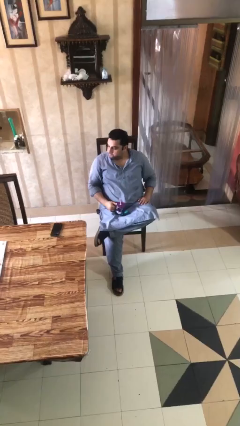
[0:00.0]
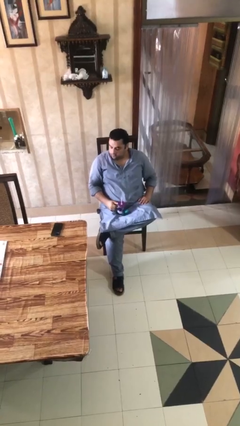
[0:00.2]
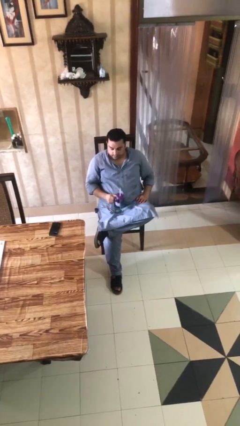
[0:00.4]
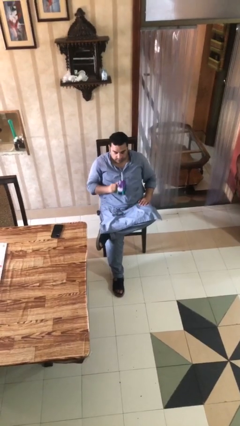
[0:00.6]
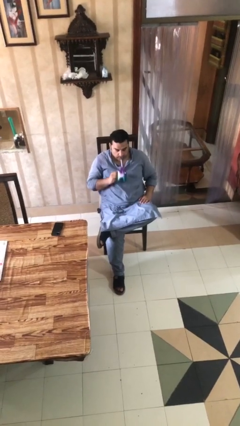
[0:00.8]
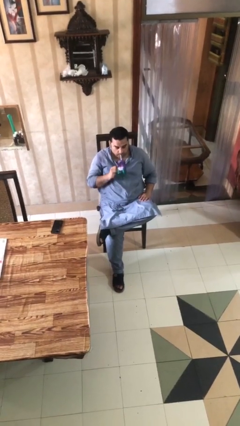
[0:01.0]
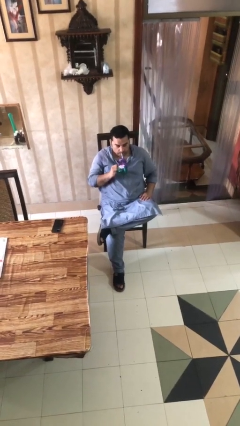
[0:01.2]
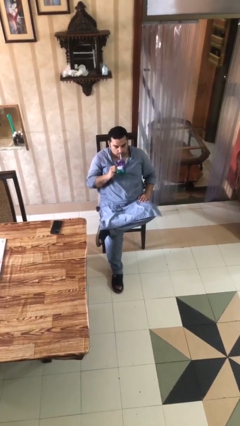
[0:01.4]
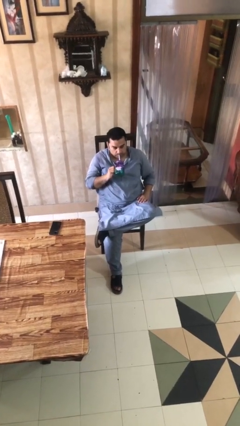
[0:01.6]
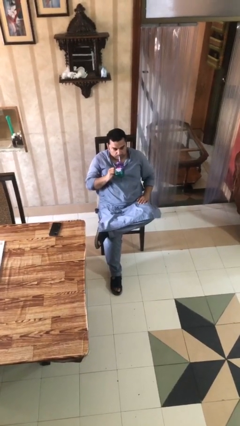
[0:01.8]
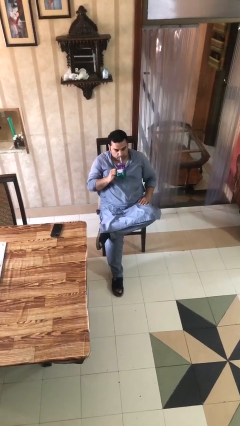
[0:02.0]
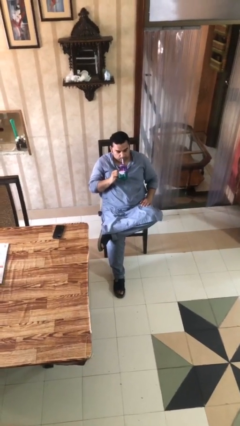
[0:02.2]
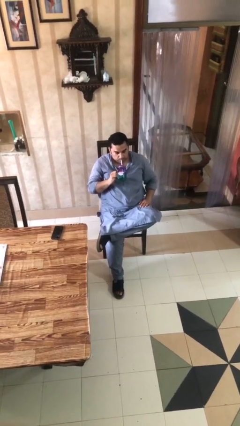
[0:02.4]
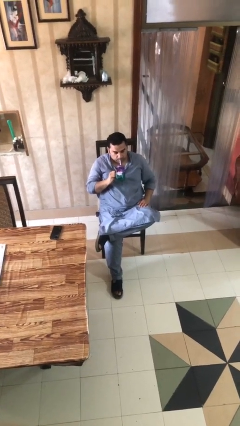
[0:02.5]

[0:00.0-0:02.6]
person drinks from straw

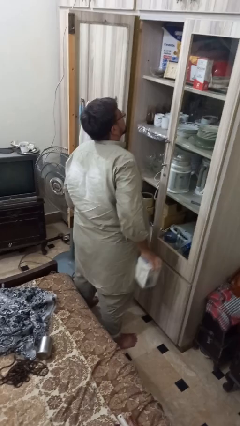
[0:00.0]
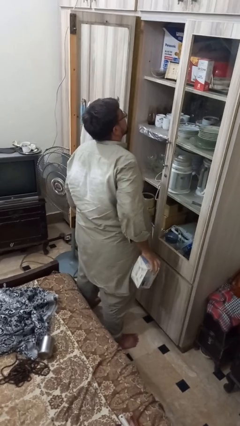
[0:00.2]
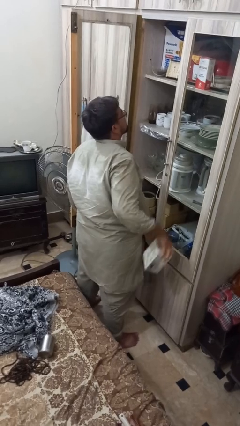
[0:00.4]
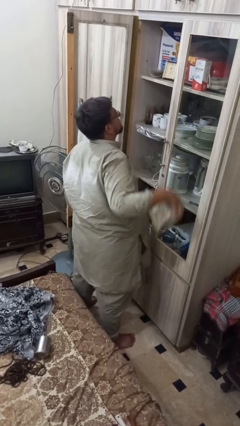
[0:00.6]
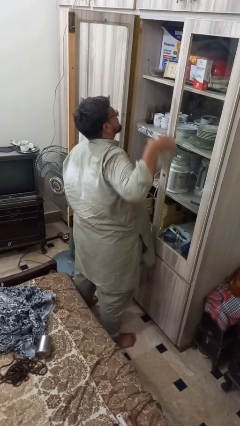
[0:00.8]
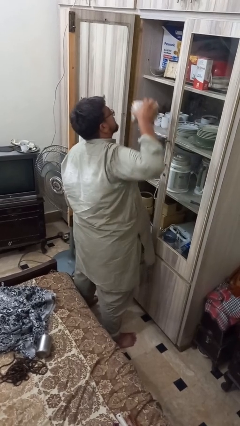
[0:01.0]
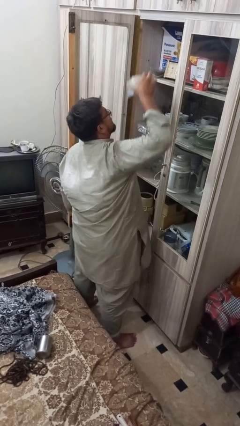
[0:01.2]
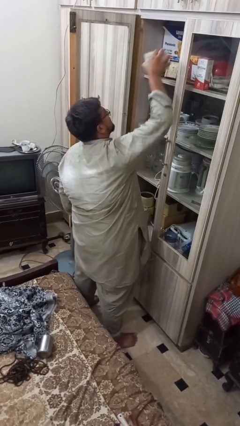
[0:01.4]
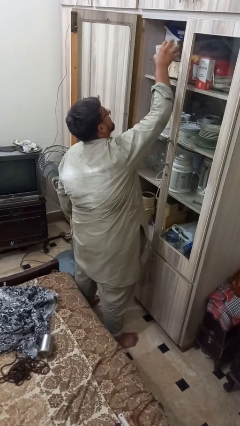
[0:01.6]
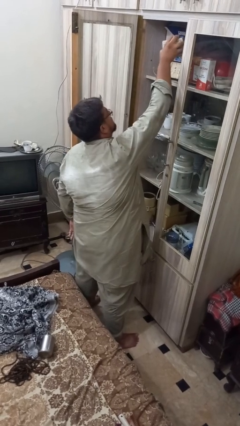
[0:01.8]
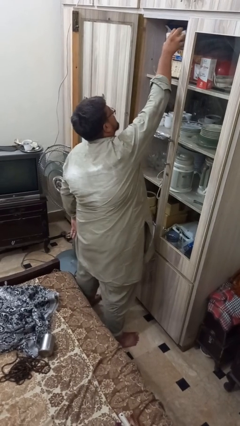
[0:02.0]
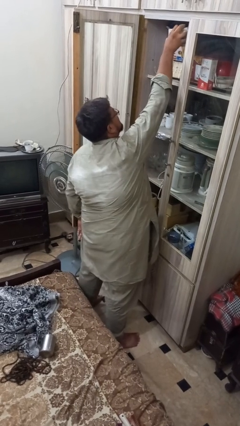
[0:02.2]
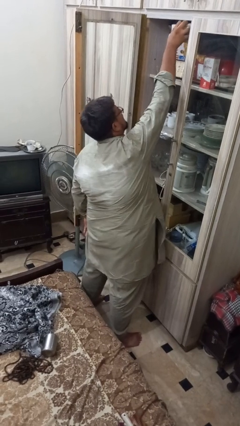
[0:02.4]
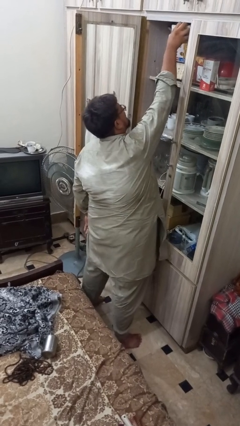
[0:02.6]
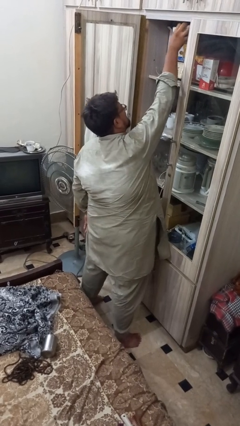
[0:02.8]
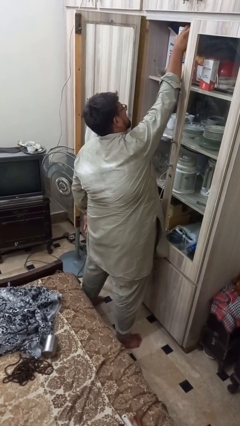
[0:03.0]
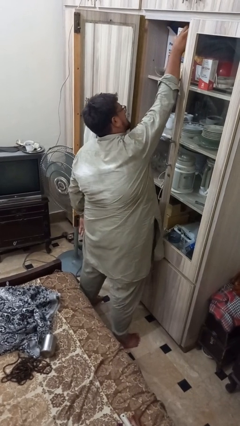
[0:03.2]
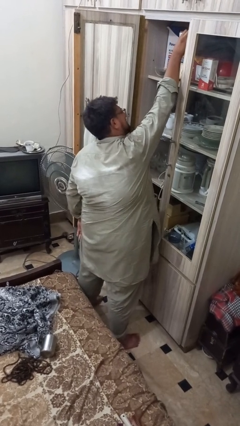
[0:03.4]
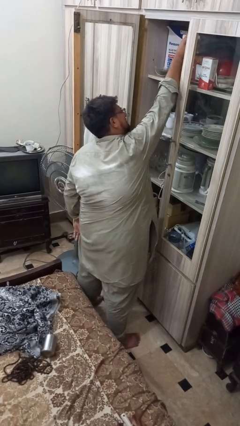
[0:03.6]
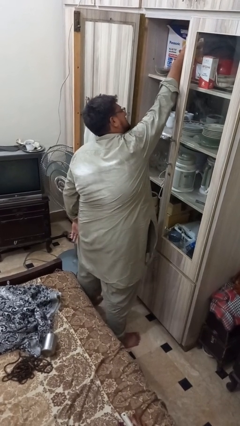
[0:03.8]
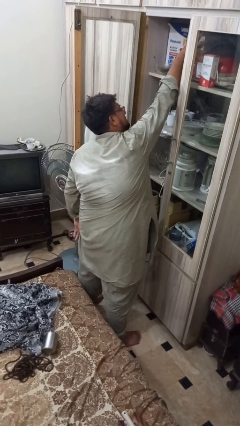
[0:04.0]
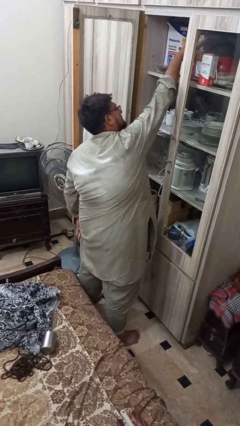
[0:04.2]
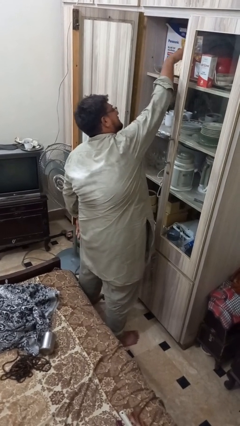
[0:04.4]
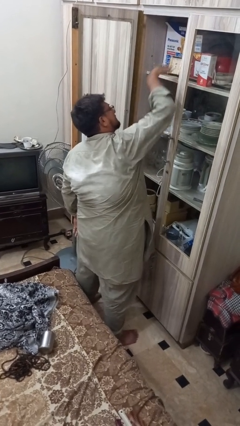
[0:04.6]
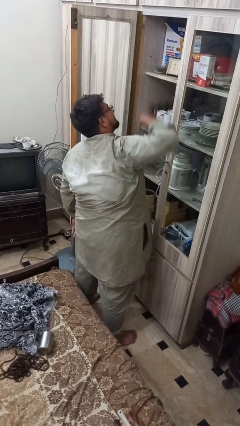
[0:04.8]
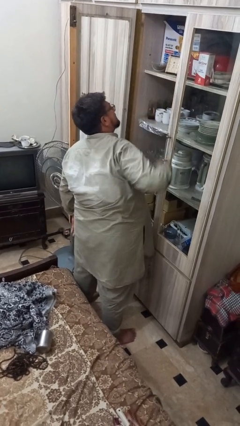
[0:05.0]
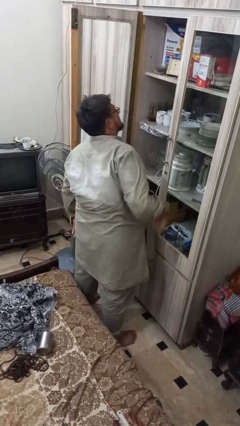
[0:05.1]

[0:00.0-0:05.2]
person puts down object on shelf

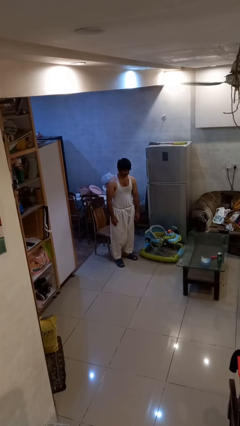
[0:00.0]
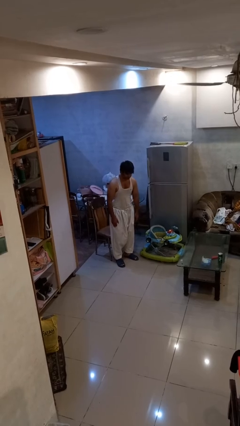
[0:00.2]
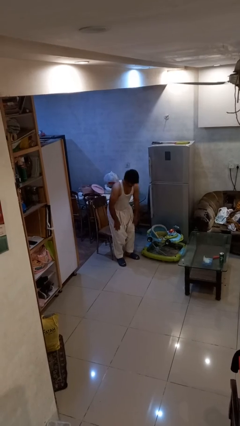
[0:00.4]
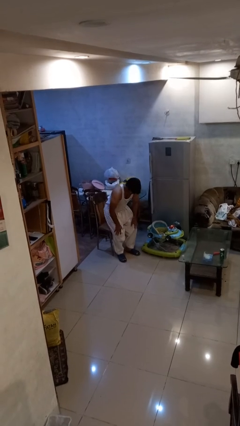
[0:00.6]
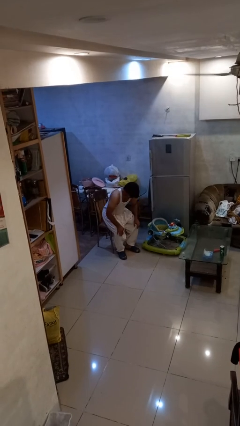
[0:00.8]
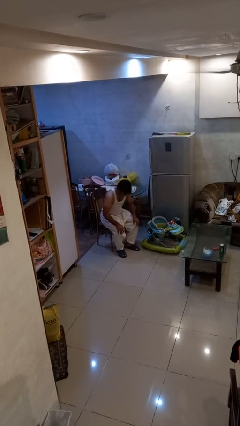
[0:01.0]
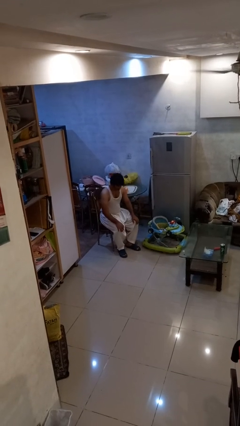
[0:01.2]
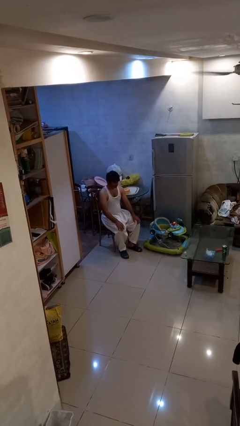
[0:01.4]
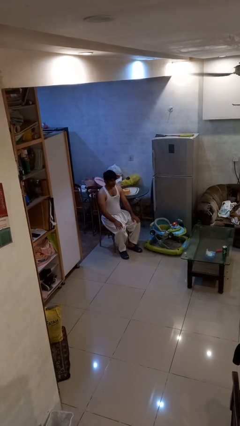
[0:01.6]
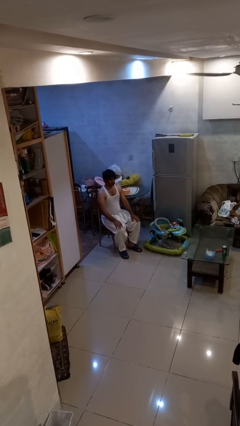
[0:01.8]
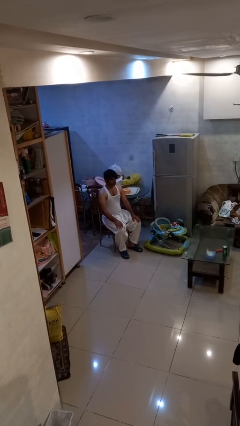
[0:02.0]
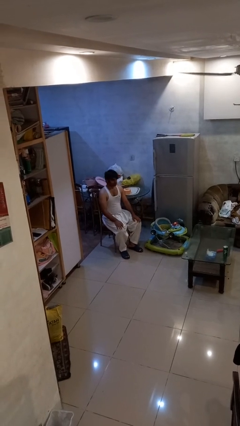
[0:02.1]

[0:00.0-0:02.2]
person sits down

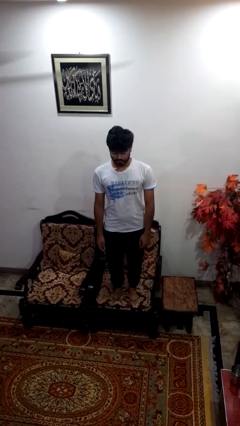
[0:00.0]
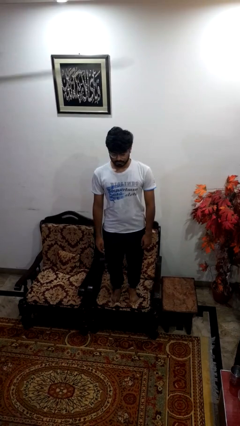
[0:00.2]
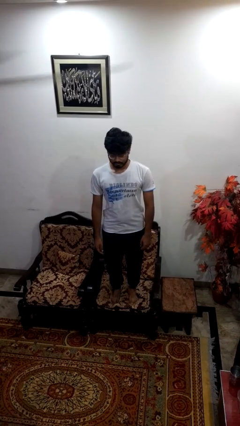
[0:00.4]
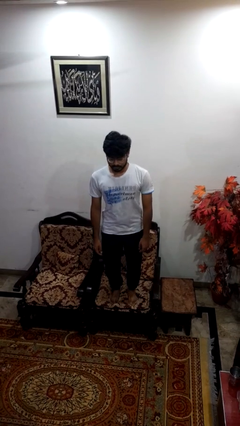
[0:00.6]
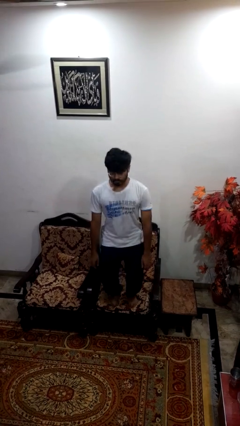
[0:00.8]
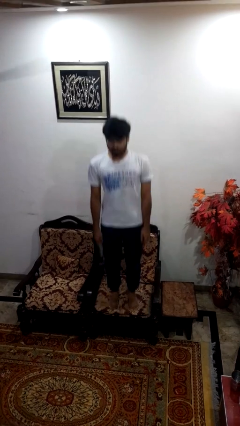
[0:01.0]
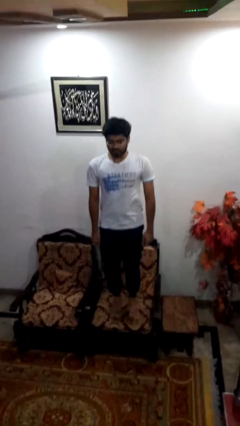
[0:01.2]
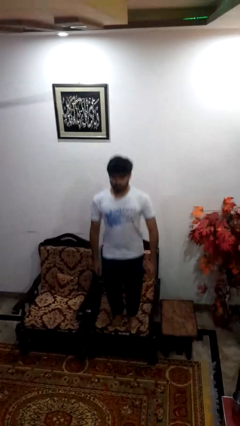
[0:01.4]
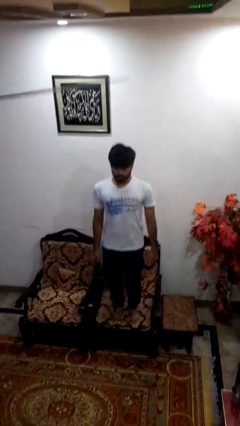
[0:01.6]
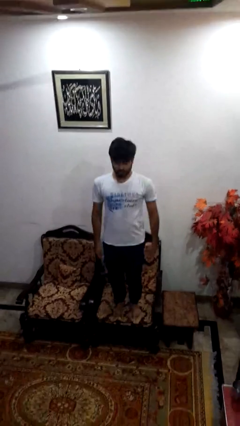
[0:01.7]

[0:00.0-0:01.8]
person jumps on couch

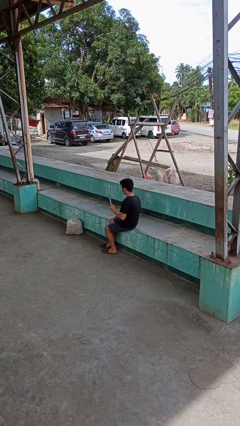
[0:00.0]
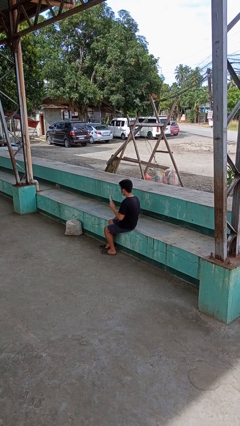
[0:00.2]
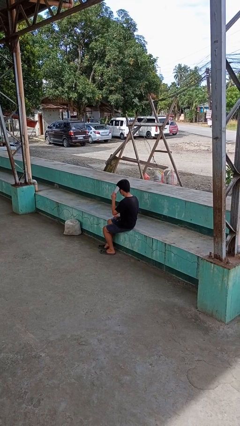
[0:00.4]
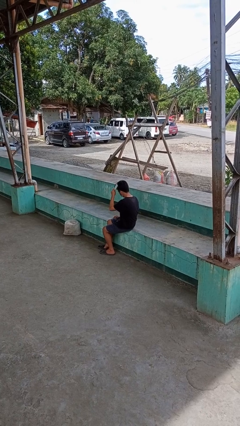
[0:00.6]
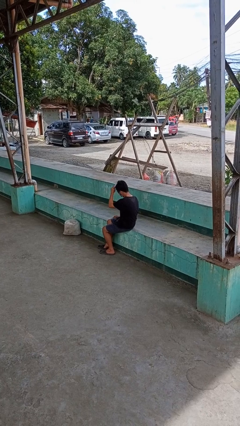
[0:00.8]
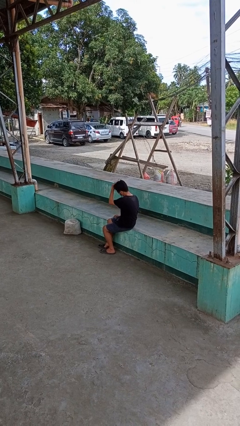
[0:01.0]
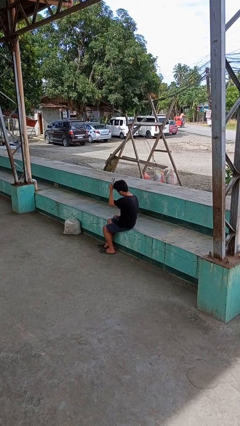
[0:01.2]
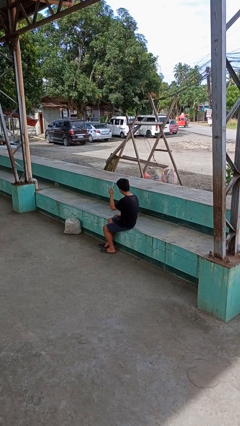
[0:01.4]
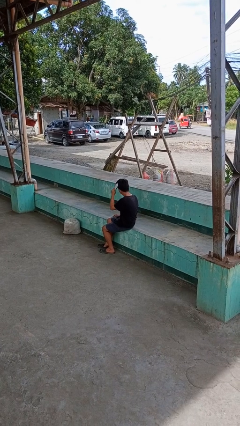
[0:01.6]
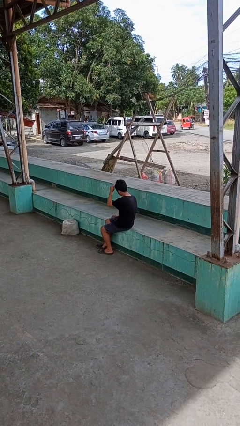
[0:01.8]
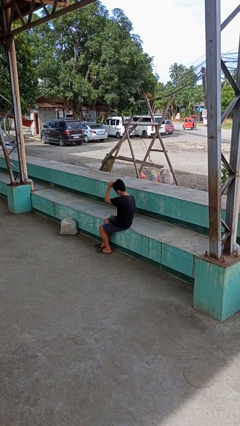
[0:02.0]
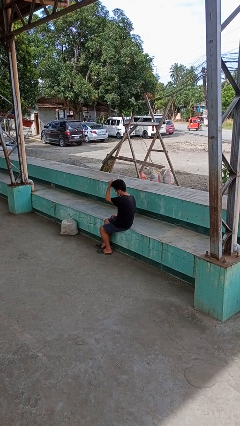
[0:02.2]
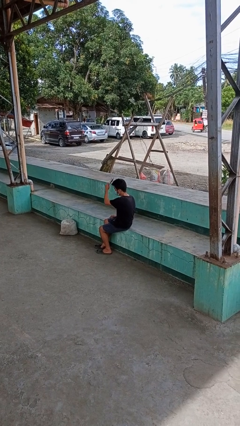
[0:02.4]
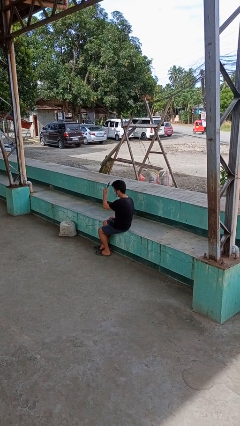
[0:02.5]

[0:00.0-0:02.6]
person brushes hair

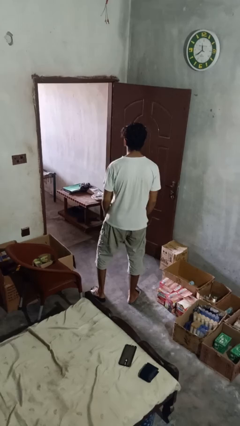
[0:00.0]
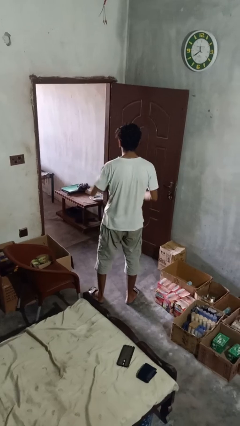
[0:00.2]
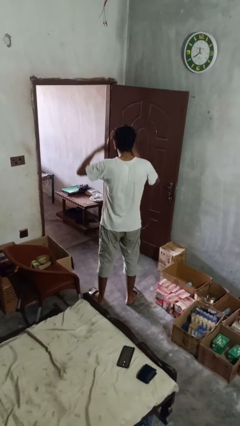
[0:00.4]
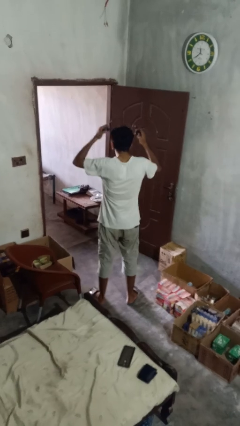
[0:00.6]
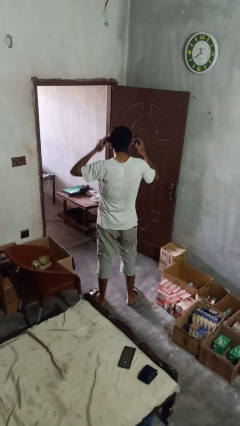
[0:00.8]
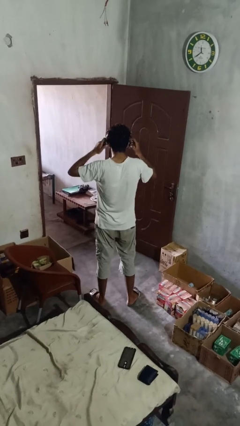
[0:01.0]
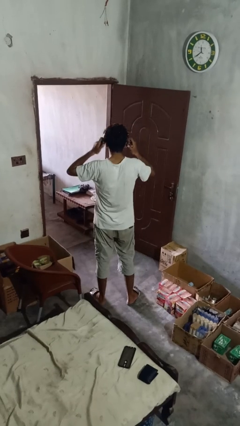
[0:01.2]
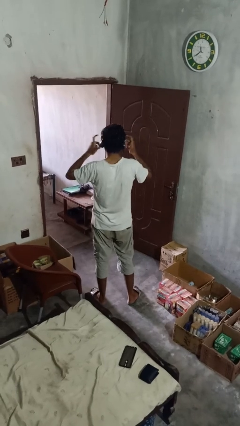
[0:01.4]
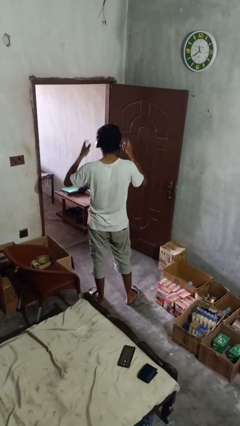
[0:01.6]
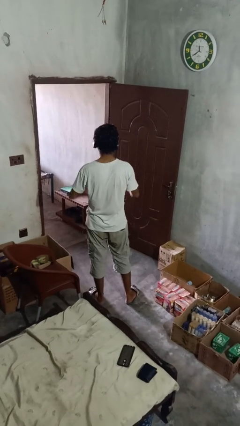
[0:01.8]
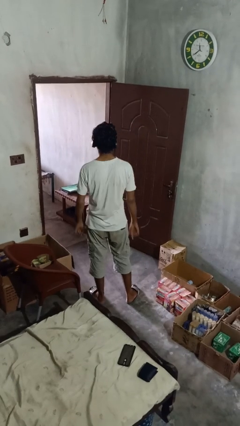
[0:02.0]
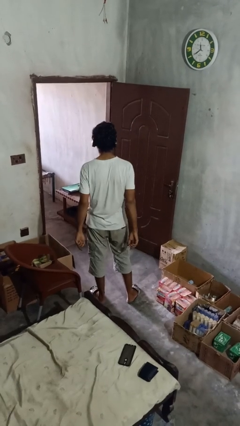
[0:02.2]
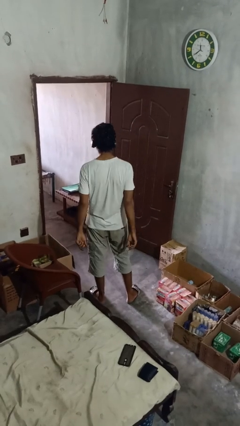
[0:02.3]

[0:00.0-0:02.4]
person puts on headphones

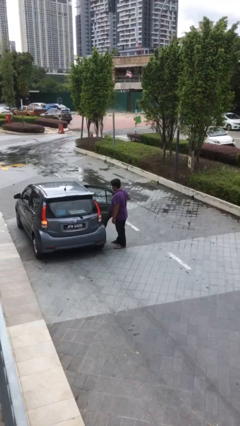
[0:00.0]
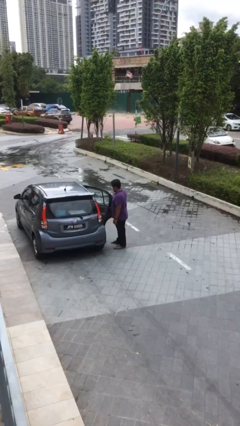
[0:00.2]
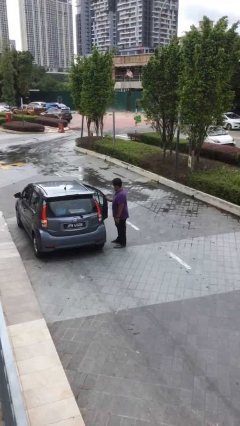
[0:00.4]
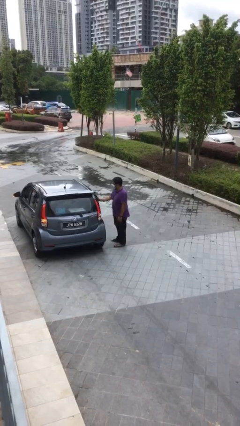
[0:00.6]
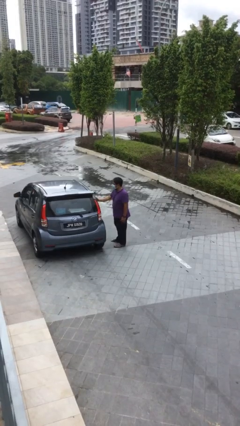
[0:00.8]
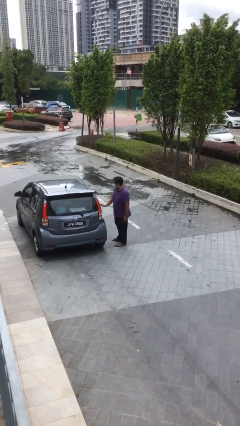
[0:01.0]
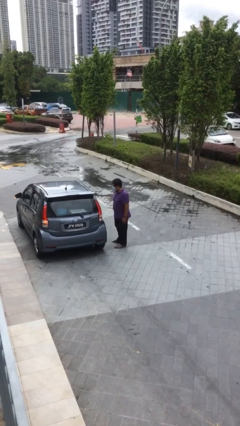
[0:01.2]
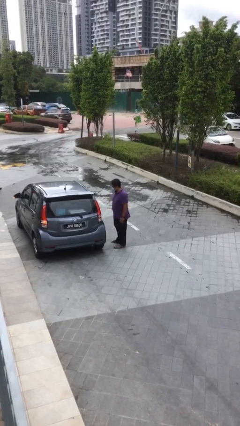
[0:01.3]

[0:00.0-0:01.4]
person closes car door
